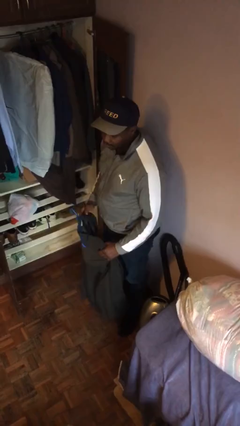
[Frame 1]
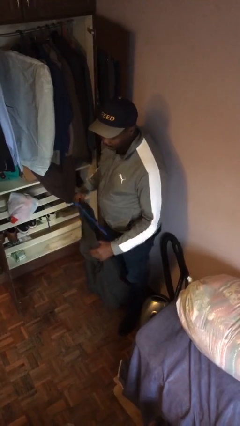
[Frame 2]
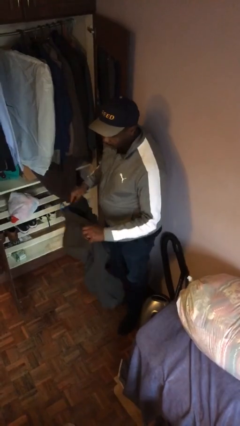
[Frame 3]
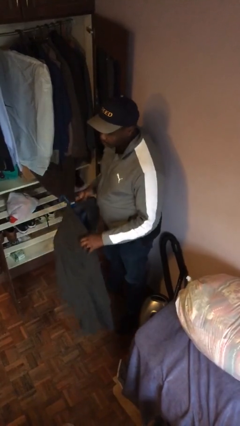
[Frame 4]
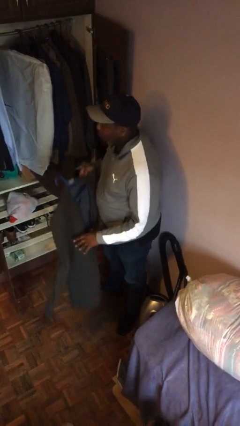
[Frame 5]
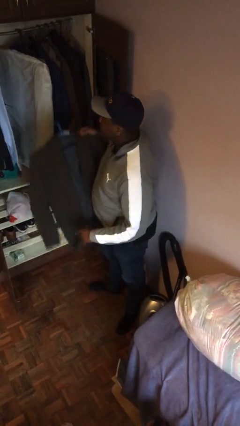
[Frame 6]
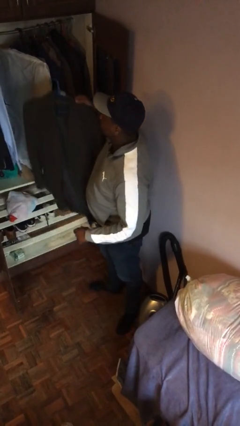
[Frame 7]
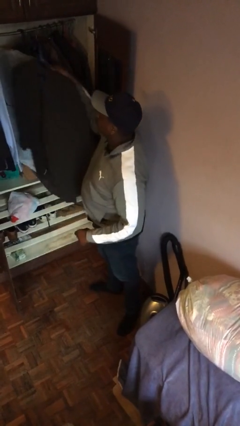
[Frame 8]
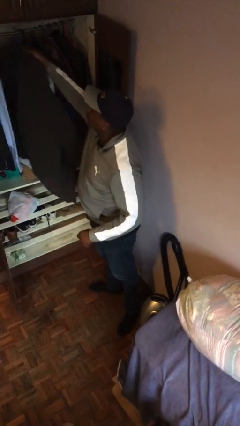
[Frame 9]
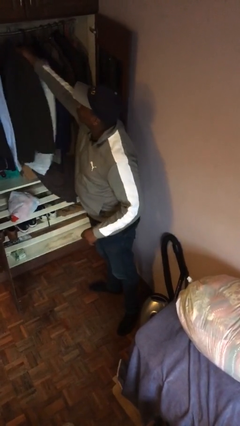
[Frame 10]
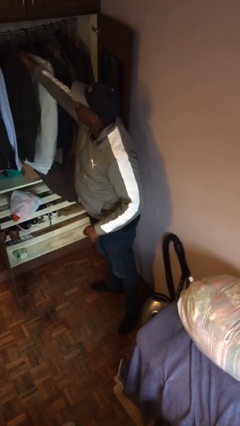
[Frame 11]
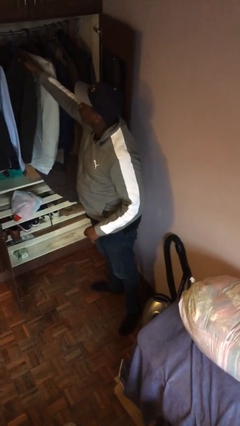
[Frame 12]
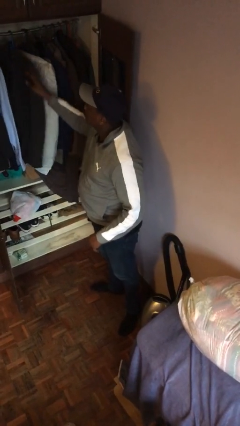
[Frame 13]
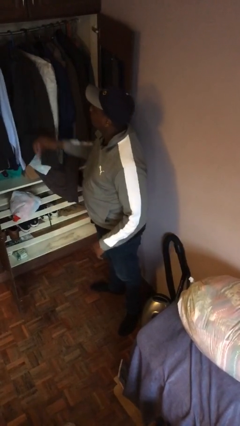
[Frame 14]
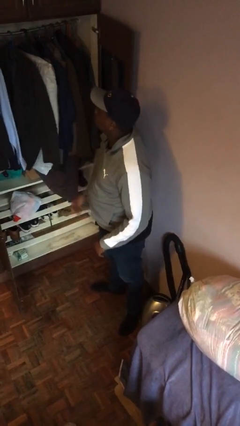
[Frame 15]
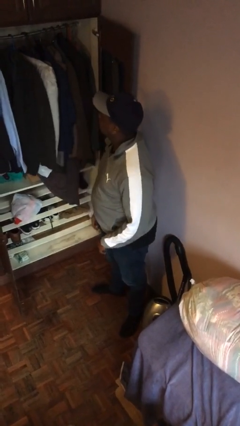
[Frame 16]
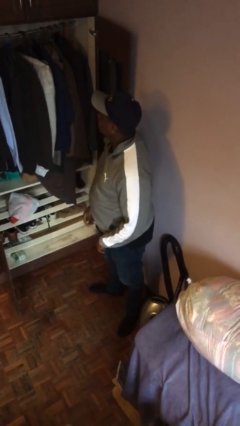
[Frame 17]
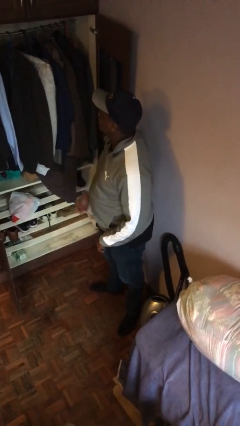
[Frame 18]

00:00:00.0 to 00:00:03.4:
person puts clothes into closet

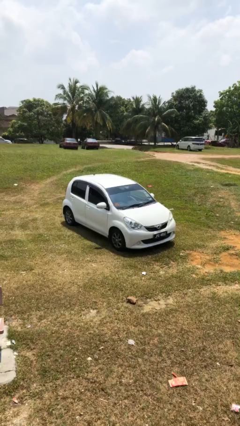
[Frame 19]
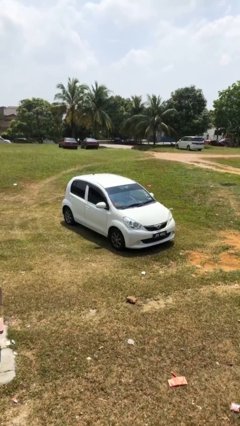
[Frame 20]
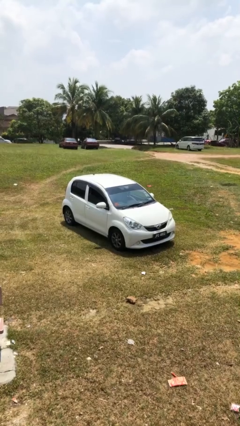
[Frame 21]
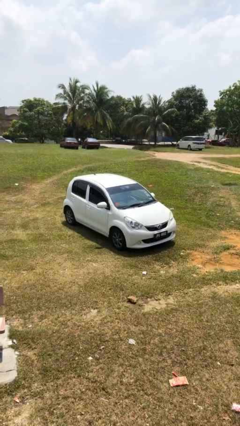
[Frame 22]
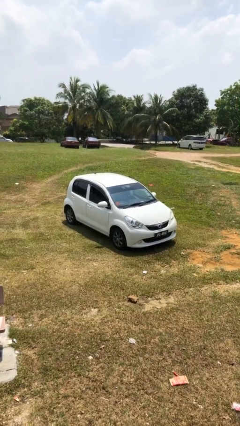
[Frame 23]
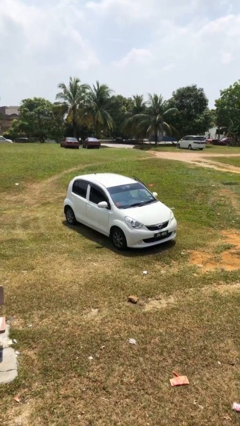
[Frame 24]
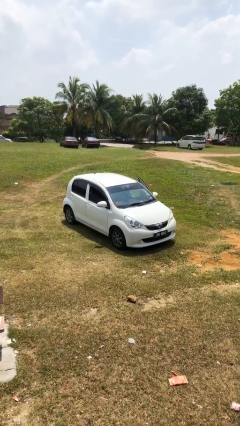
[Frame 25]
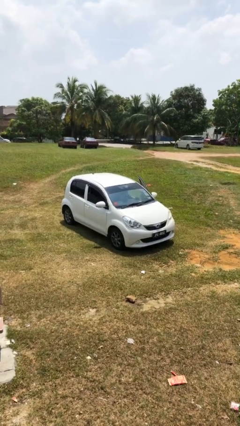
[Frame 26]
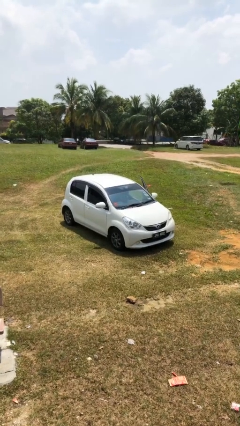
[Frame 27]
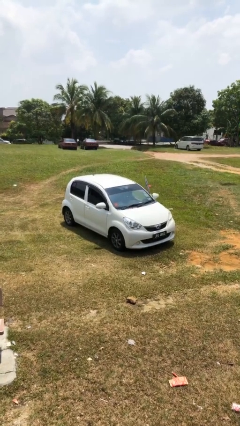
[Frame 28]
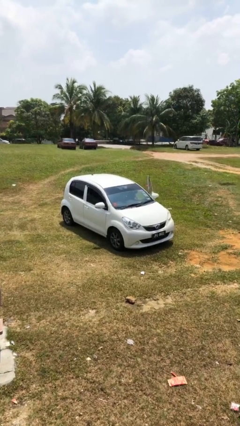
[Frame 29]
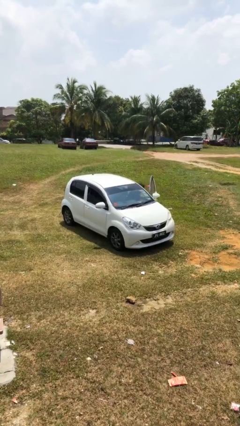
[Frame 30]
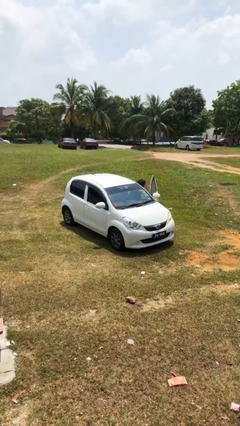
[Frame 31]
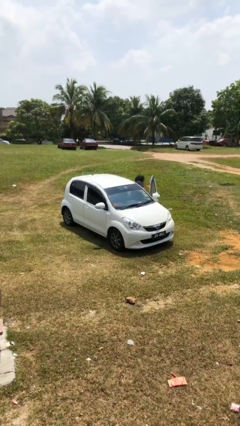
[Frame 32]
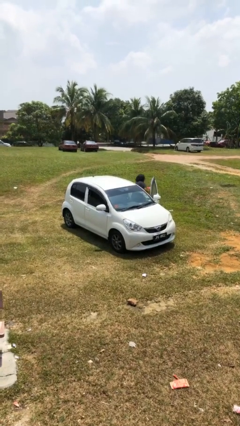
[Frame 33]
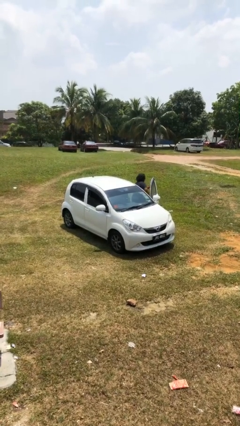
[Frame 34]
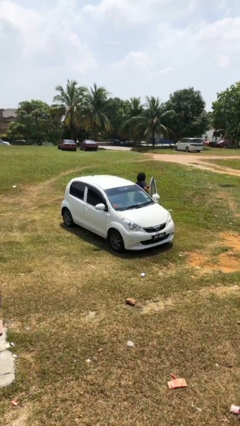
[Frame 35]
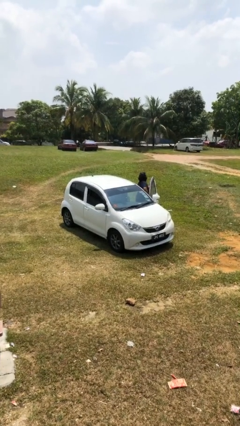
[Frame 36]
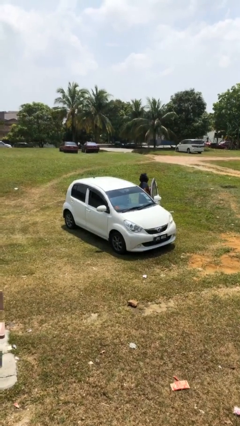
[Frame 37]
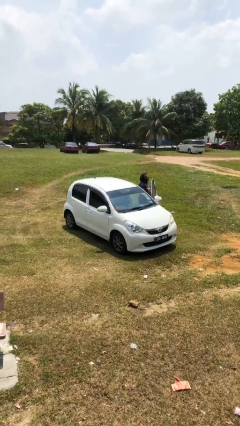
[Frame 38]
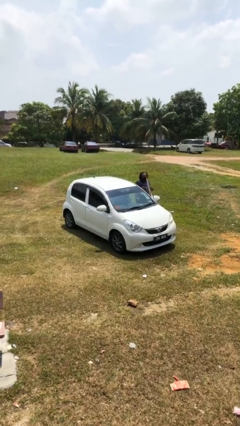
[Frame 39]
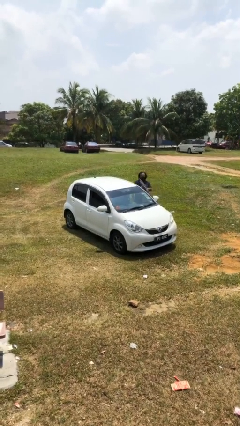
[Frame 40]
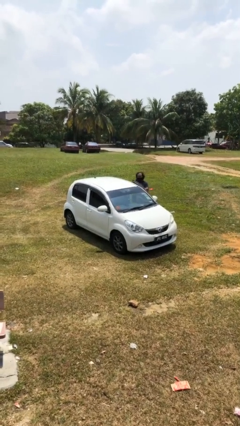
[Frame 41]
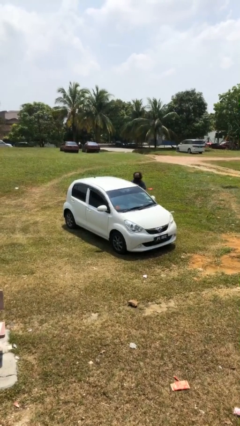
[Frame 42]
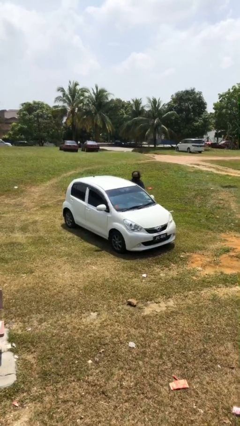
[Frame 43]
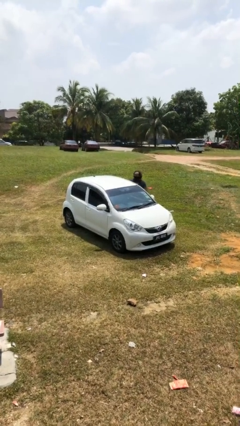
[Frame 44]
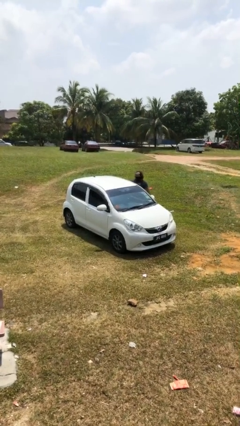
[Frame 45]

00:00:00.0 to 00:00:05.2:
car drops off person

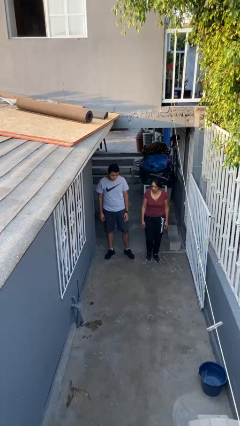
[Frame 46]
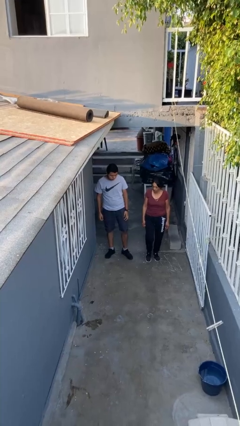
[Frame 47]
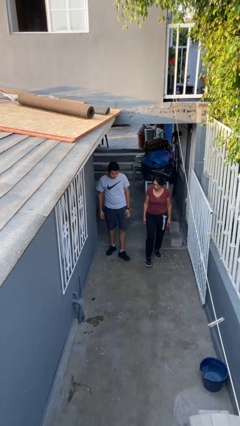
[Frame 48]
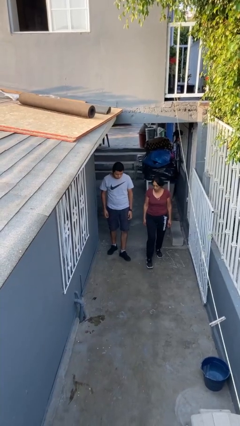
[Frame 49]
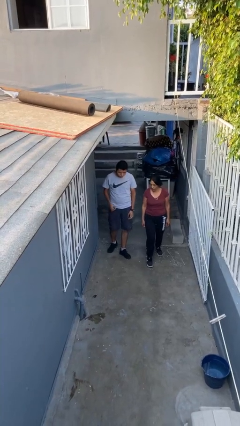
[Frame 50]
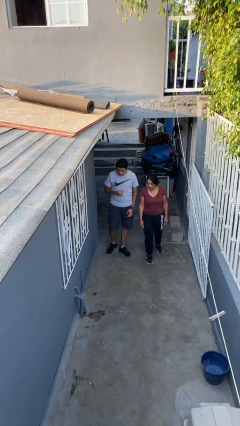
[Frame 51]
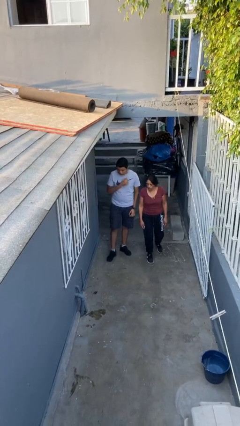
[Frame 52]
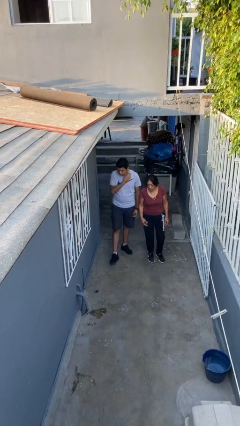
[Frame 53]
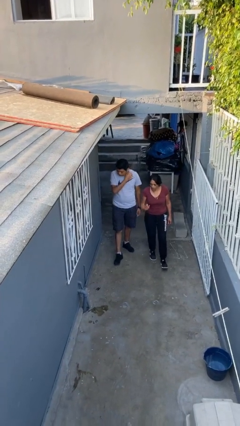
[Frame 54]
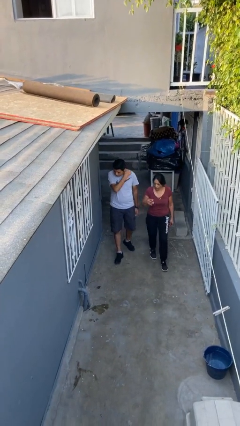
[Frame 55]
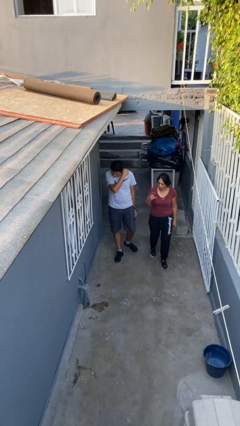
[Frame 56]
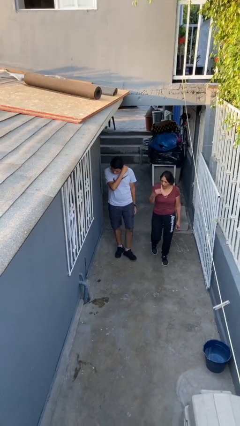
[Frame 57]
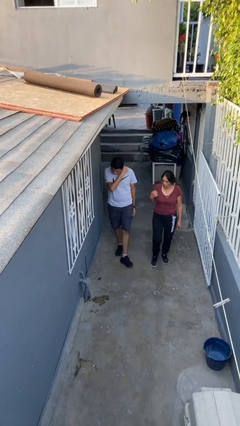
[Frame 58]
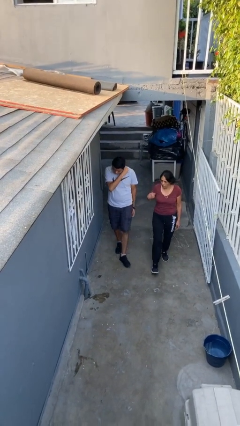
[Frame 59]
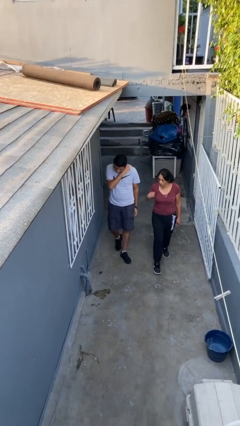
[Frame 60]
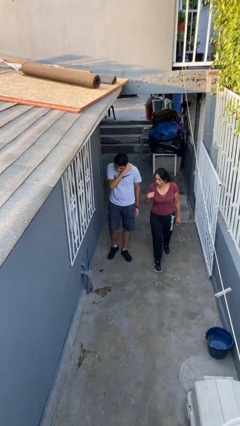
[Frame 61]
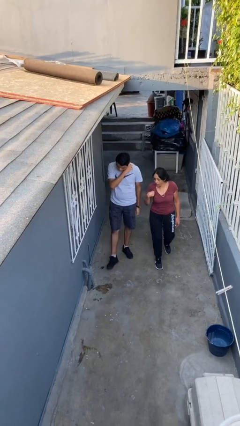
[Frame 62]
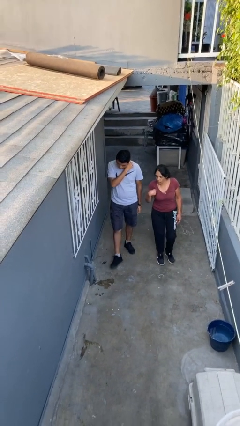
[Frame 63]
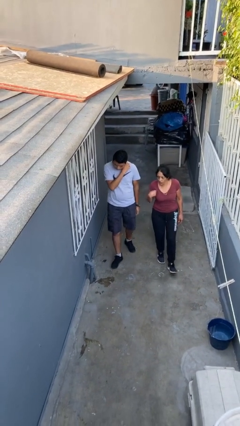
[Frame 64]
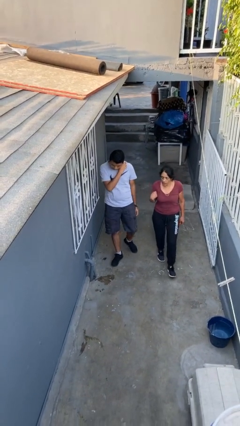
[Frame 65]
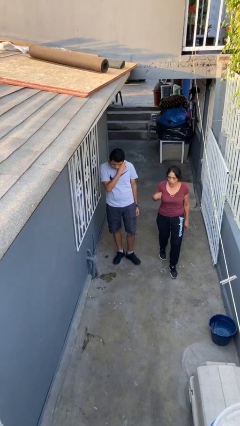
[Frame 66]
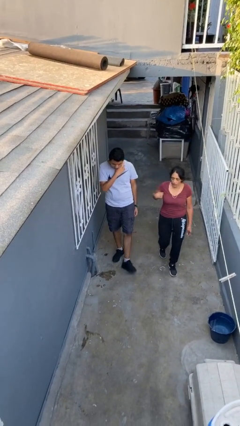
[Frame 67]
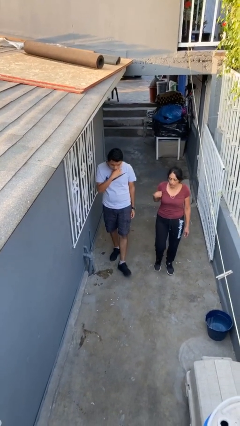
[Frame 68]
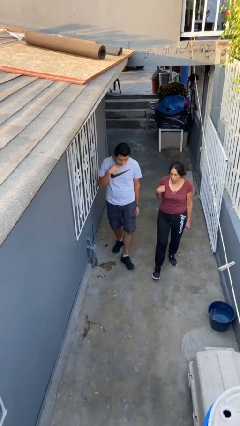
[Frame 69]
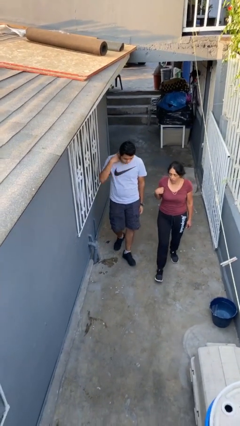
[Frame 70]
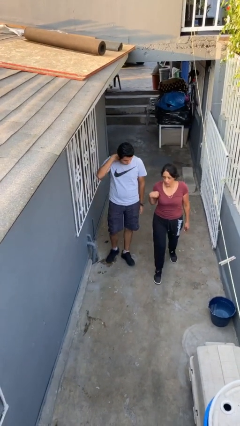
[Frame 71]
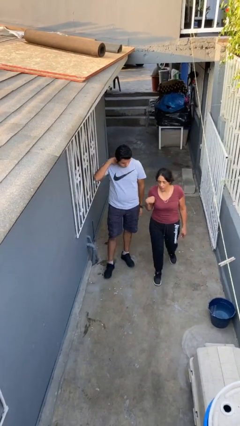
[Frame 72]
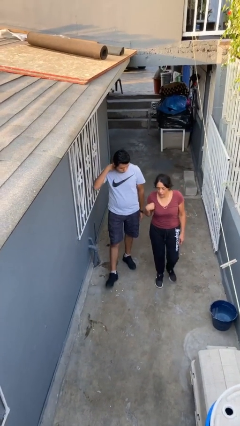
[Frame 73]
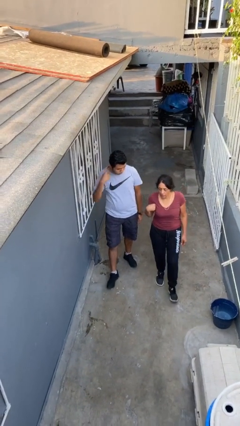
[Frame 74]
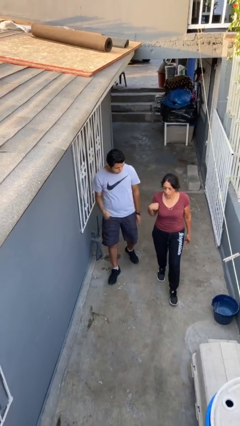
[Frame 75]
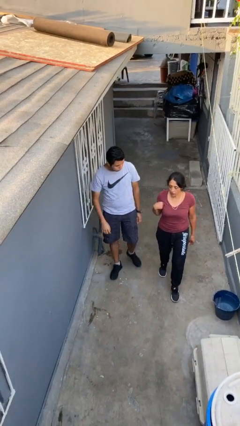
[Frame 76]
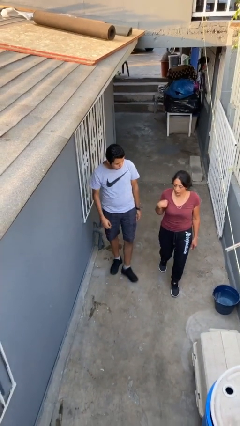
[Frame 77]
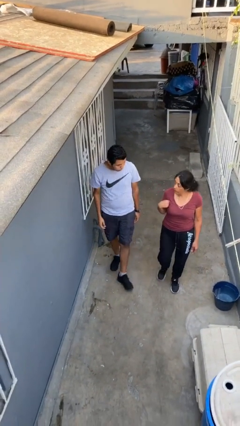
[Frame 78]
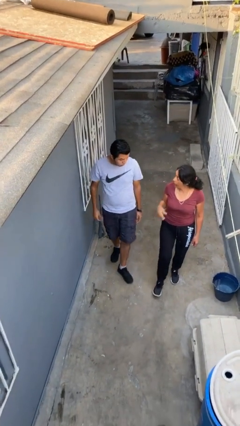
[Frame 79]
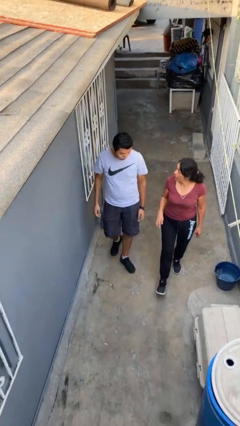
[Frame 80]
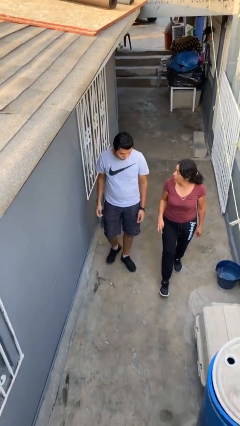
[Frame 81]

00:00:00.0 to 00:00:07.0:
person talks to person

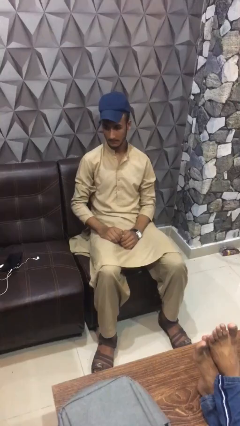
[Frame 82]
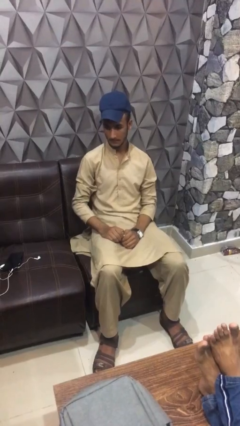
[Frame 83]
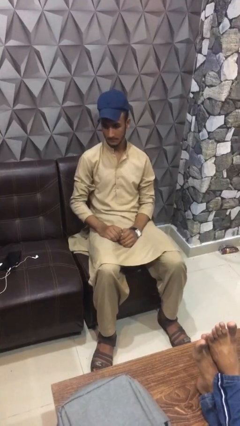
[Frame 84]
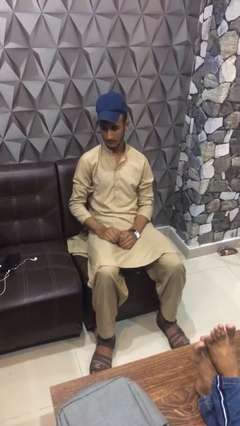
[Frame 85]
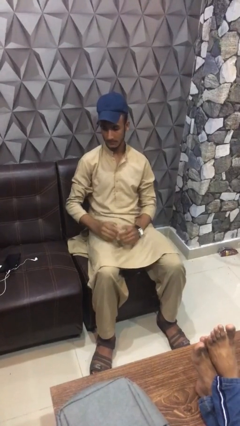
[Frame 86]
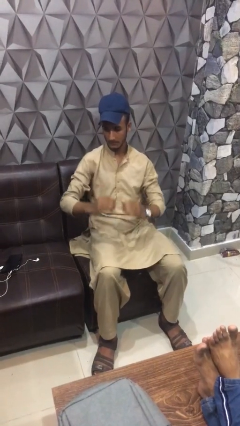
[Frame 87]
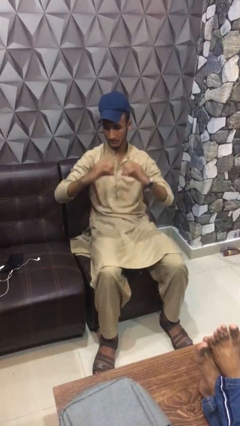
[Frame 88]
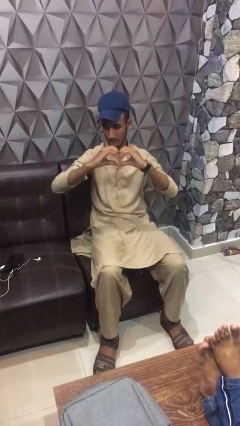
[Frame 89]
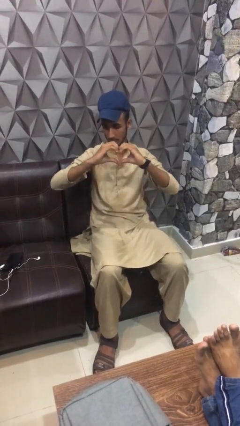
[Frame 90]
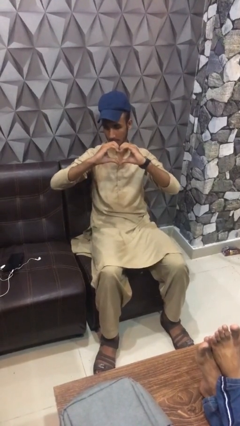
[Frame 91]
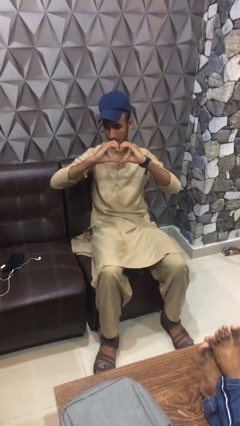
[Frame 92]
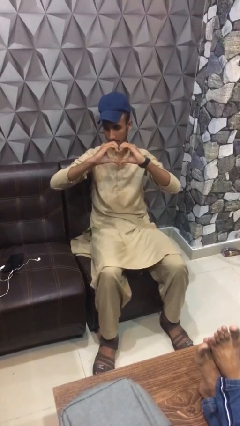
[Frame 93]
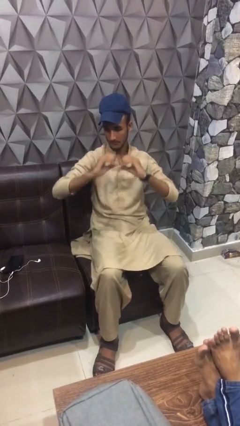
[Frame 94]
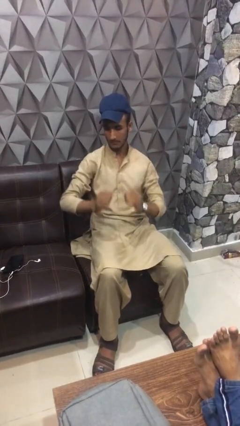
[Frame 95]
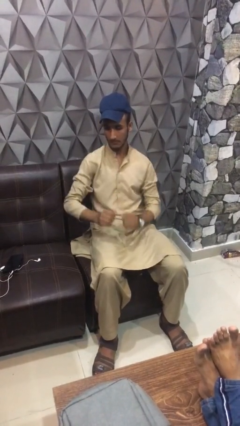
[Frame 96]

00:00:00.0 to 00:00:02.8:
person gestures heart
